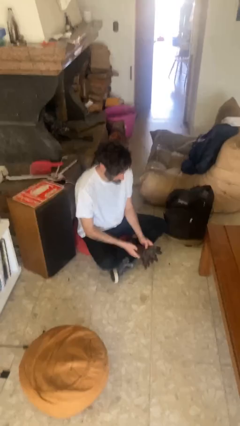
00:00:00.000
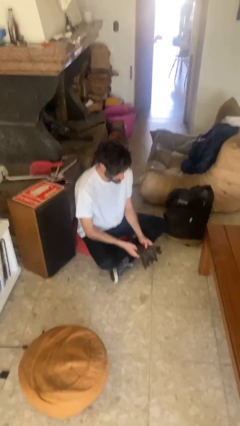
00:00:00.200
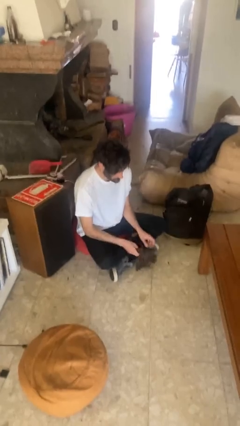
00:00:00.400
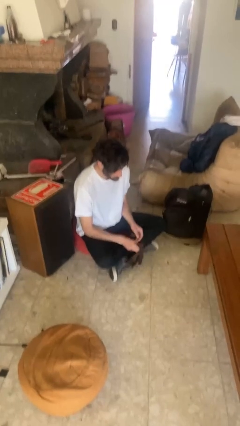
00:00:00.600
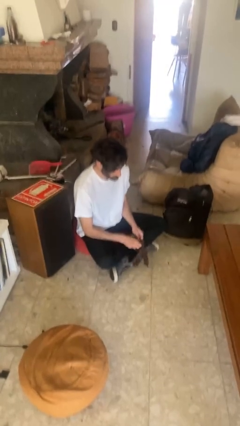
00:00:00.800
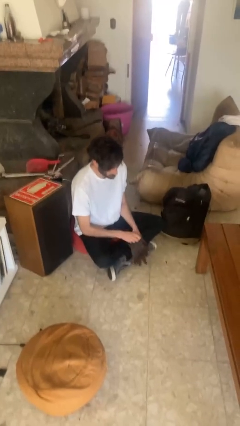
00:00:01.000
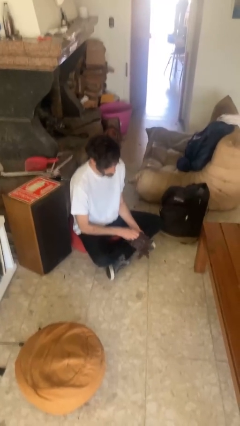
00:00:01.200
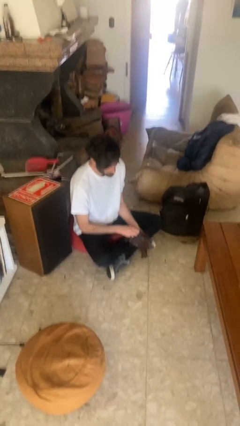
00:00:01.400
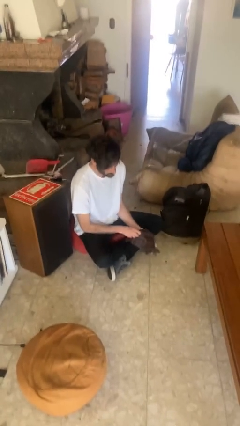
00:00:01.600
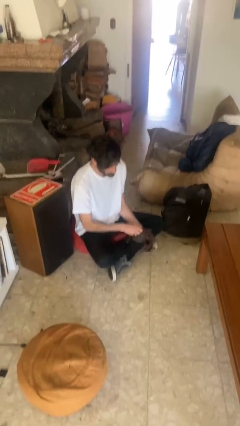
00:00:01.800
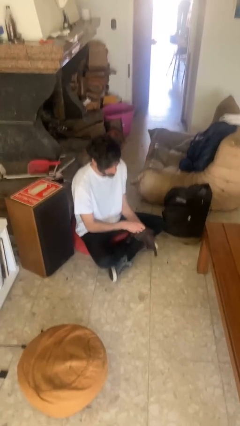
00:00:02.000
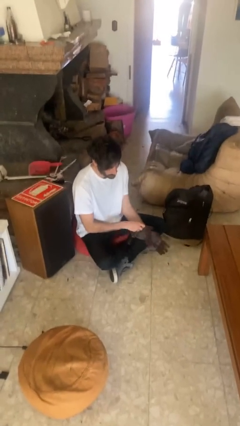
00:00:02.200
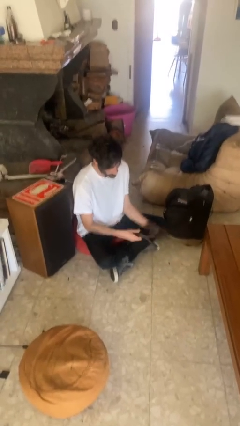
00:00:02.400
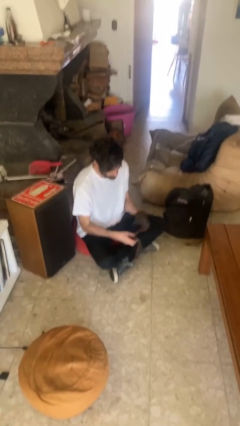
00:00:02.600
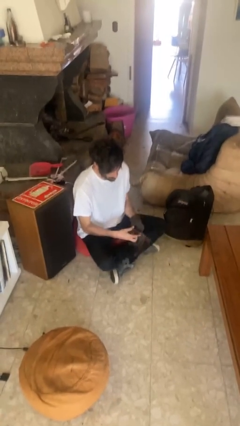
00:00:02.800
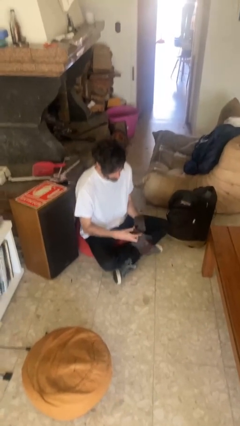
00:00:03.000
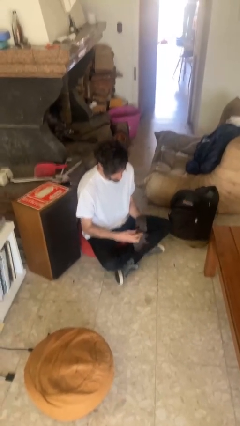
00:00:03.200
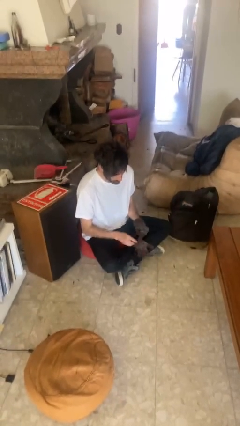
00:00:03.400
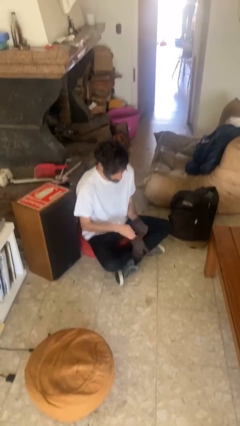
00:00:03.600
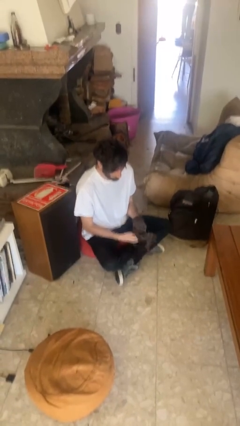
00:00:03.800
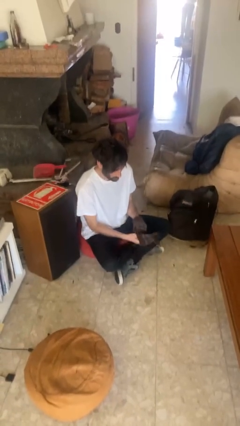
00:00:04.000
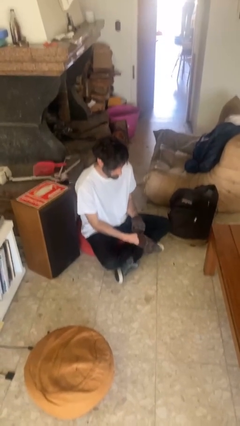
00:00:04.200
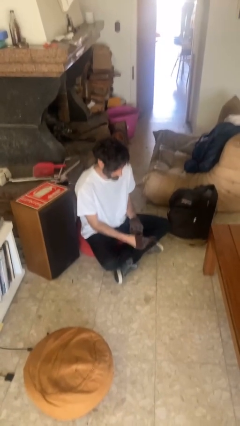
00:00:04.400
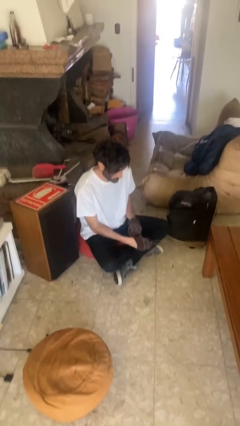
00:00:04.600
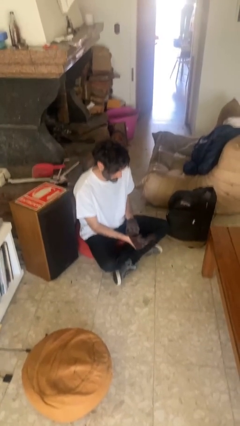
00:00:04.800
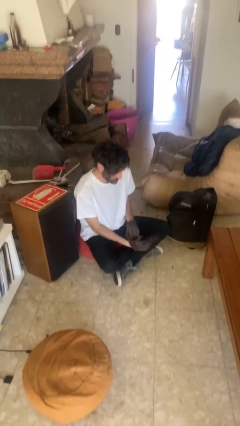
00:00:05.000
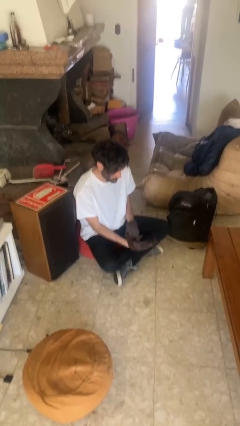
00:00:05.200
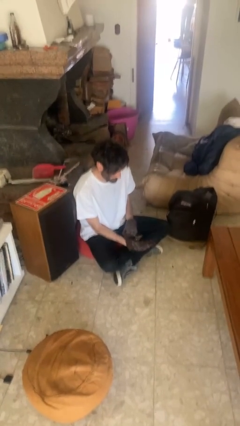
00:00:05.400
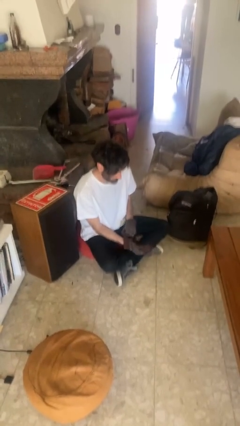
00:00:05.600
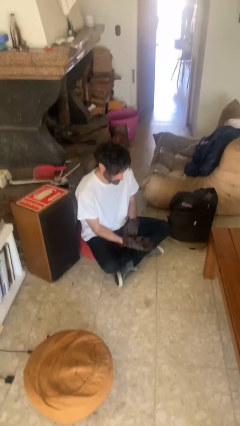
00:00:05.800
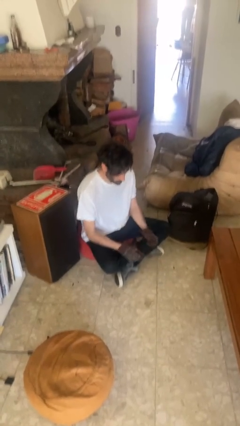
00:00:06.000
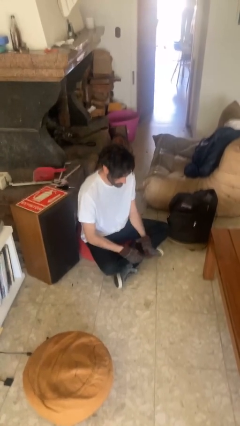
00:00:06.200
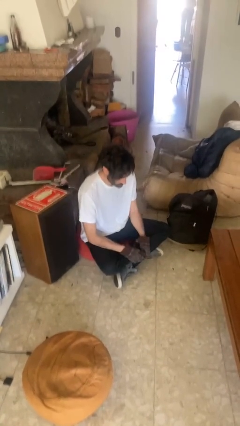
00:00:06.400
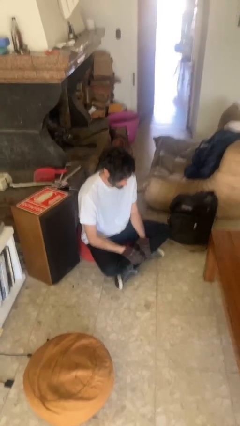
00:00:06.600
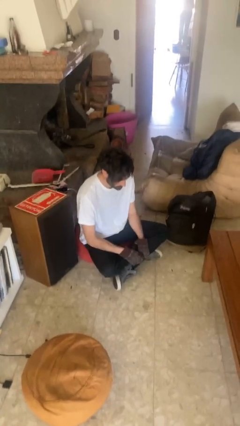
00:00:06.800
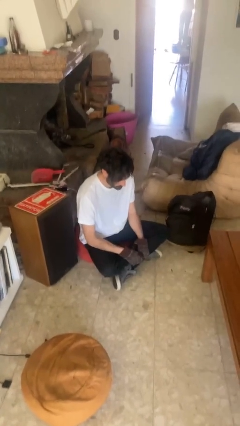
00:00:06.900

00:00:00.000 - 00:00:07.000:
person puts on gloves

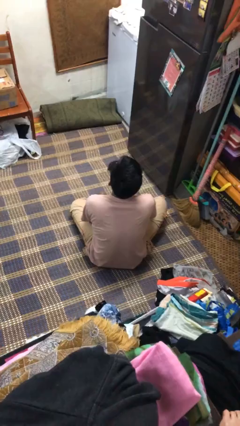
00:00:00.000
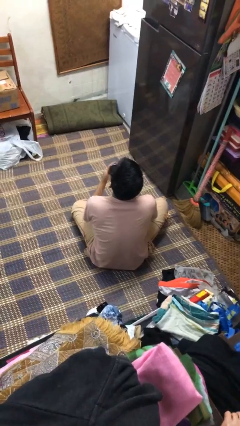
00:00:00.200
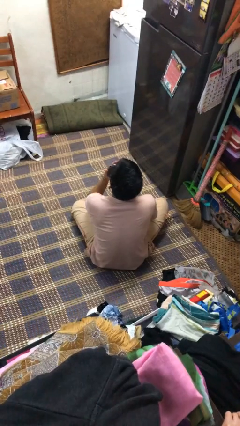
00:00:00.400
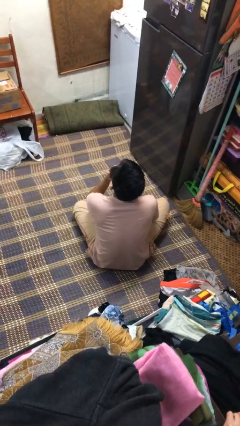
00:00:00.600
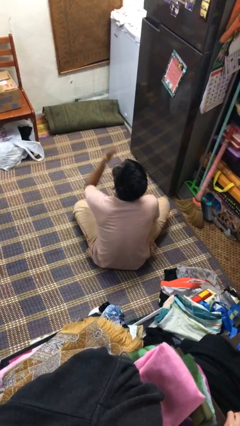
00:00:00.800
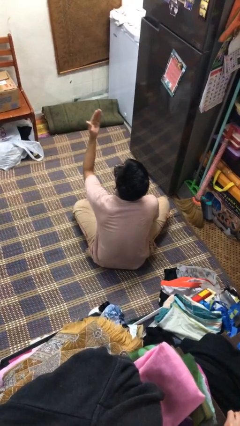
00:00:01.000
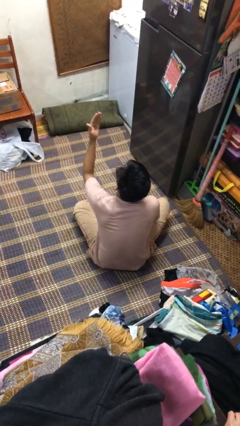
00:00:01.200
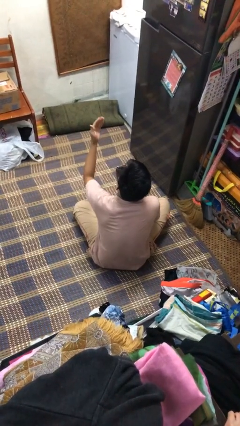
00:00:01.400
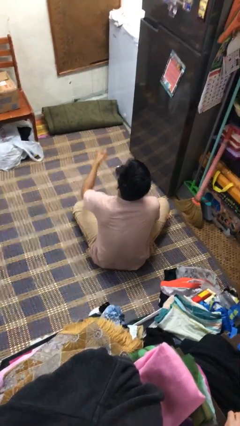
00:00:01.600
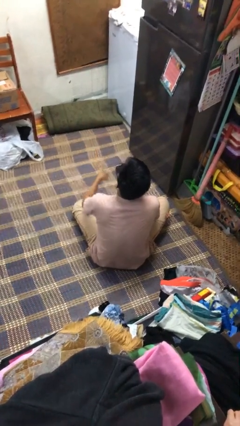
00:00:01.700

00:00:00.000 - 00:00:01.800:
person gestures blow kiss

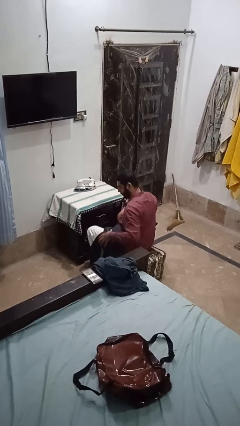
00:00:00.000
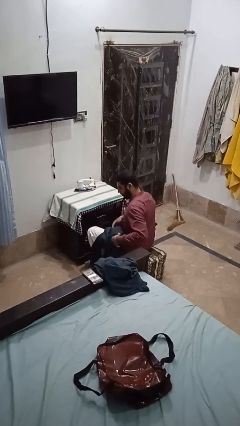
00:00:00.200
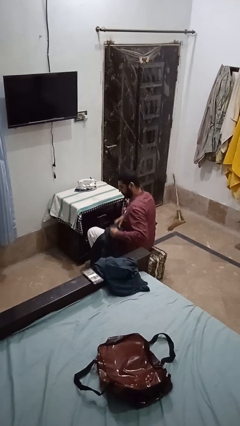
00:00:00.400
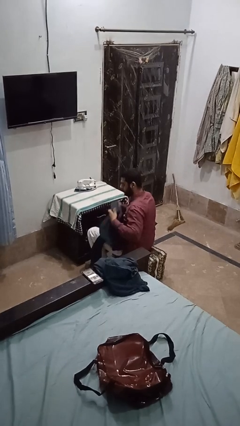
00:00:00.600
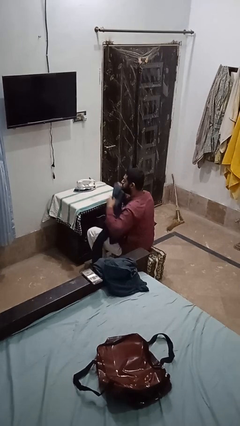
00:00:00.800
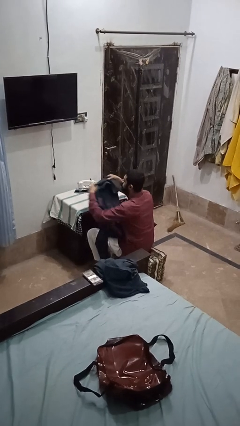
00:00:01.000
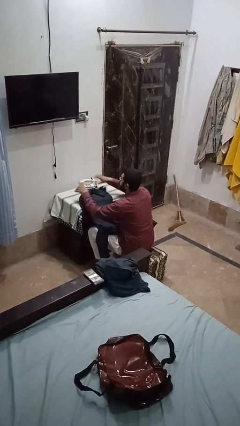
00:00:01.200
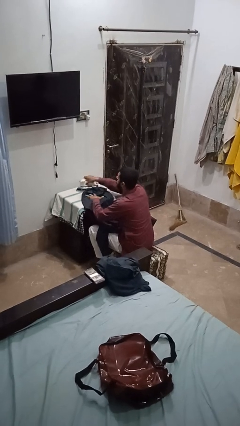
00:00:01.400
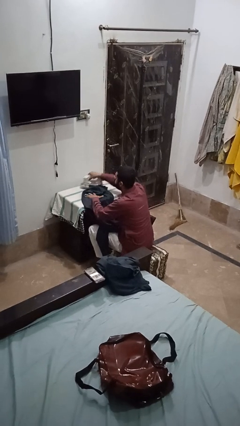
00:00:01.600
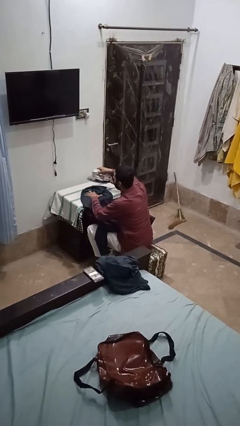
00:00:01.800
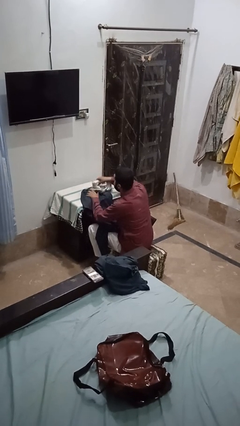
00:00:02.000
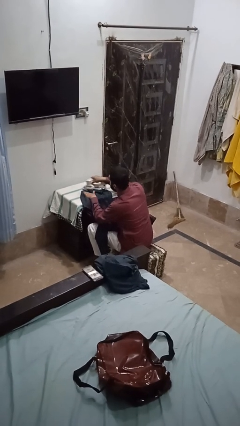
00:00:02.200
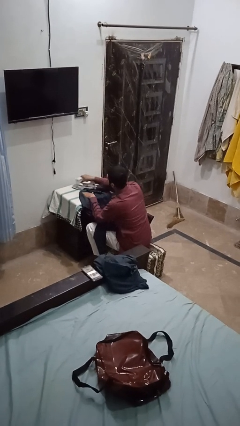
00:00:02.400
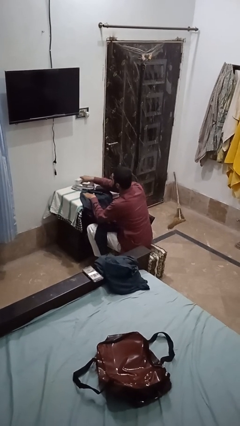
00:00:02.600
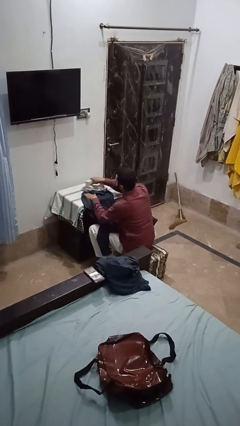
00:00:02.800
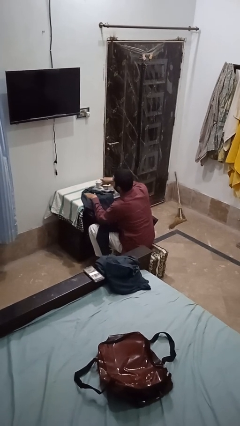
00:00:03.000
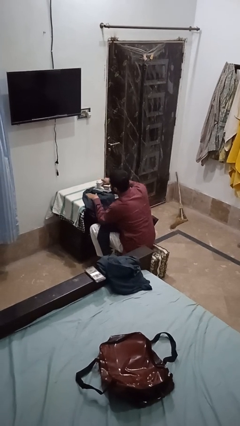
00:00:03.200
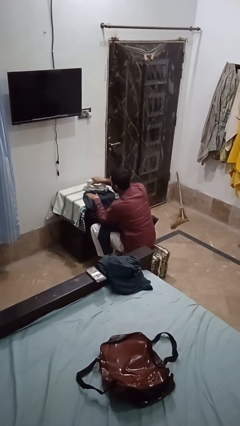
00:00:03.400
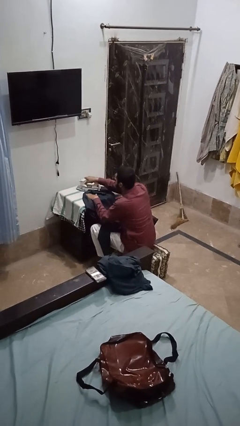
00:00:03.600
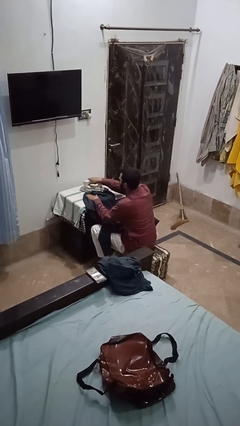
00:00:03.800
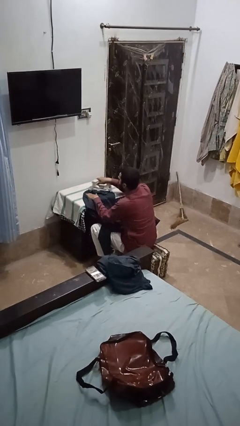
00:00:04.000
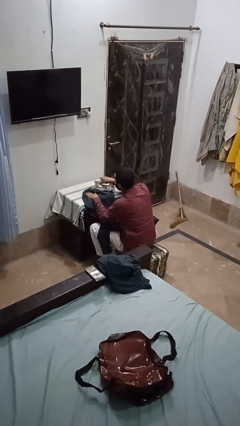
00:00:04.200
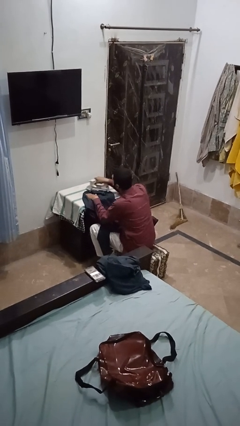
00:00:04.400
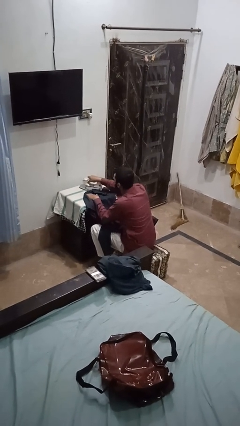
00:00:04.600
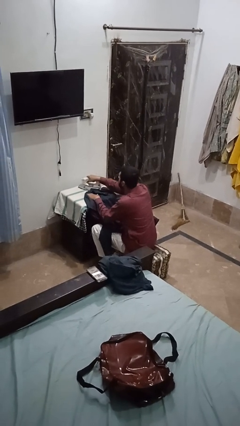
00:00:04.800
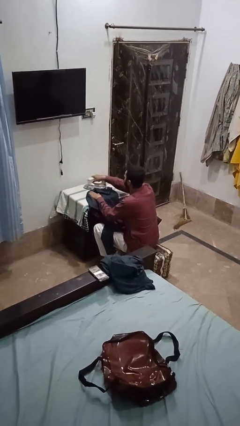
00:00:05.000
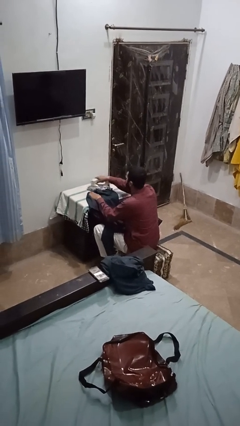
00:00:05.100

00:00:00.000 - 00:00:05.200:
person irons clothes

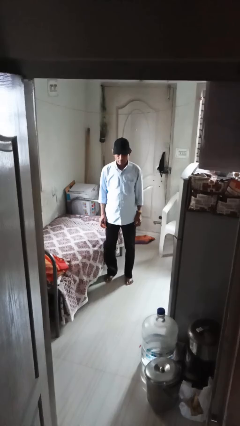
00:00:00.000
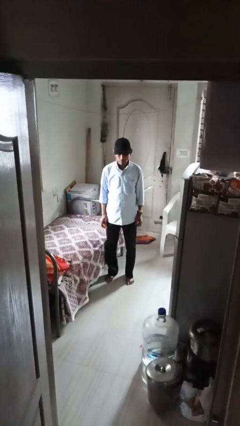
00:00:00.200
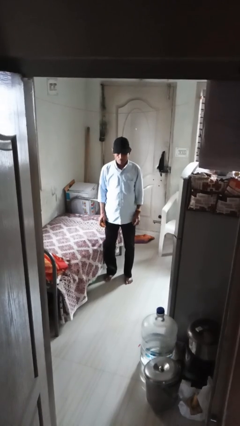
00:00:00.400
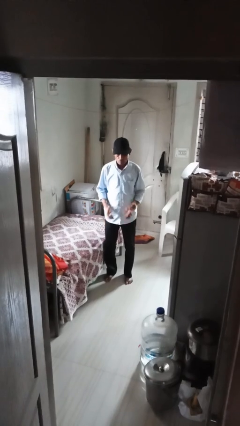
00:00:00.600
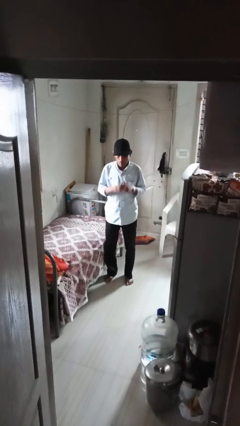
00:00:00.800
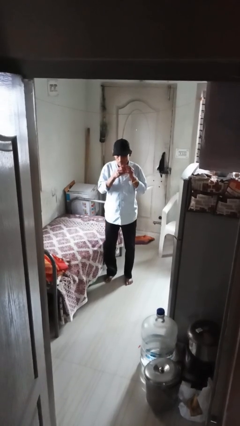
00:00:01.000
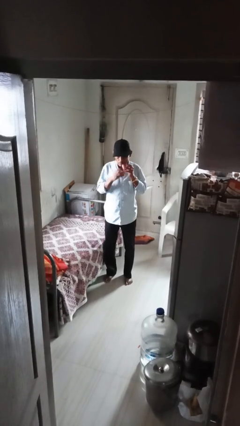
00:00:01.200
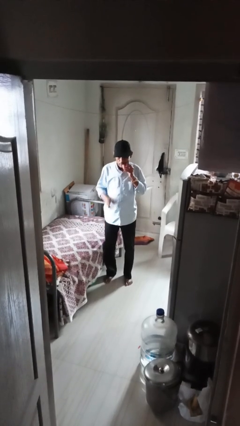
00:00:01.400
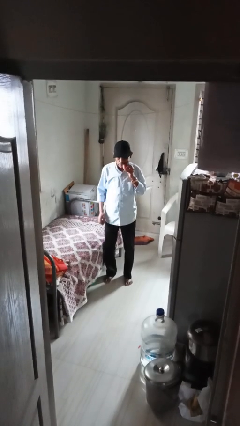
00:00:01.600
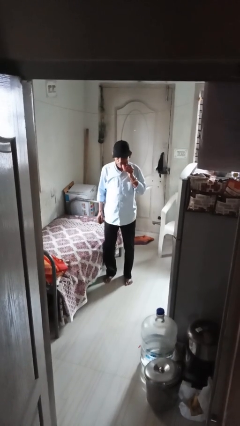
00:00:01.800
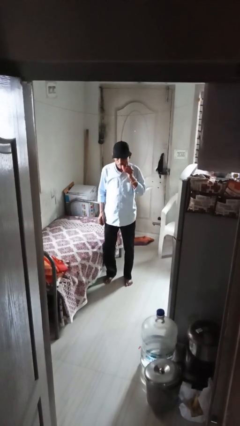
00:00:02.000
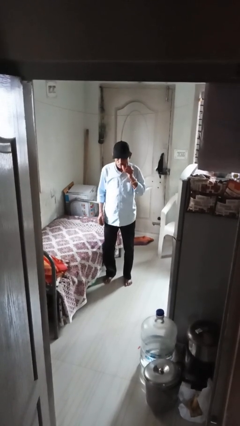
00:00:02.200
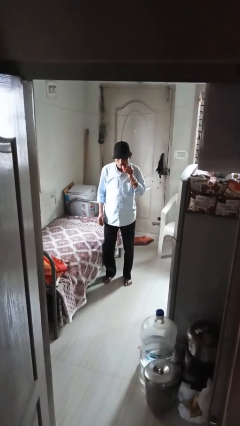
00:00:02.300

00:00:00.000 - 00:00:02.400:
person eats apple

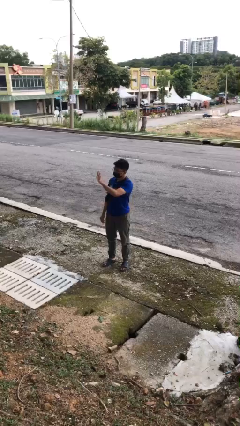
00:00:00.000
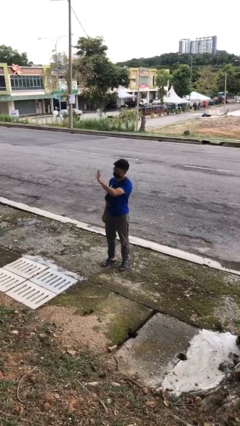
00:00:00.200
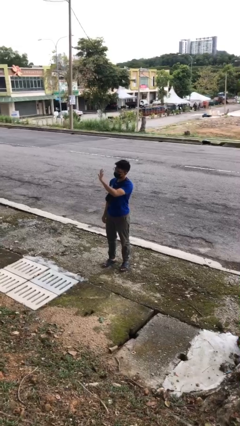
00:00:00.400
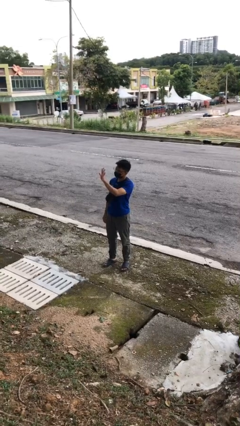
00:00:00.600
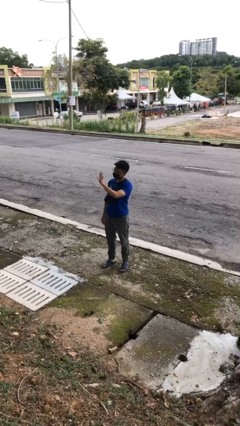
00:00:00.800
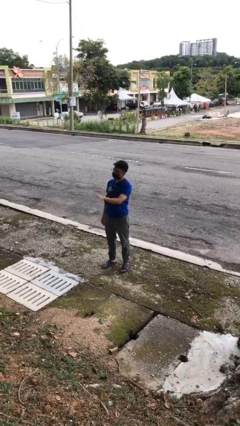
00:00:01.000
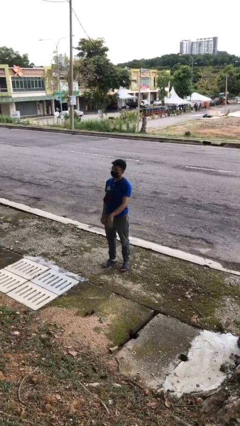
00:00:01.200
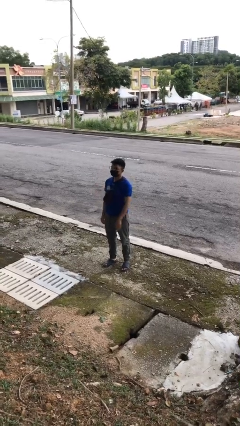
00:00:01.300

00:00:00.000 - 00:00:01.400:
person gestures stop

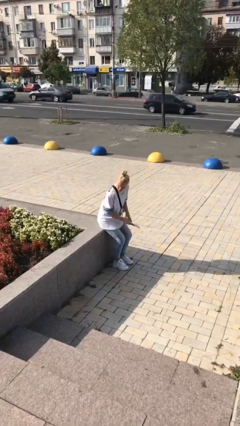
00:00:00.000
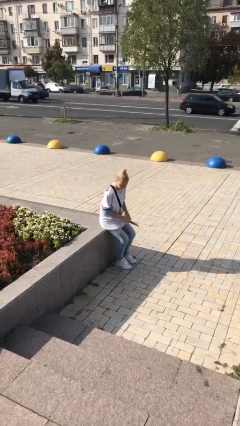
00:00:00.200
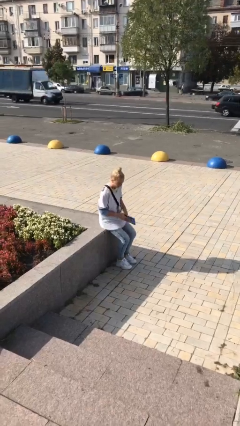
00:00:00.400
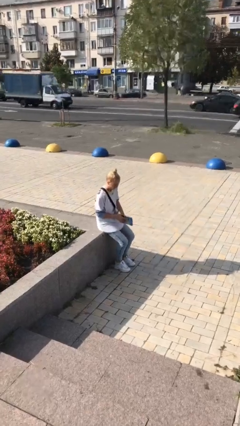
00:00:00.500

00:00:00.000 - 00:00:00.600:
person sits down
